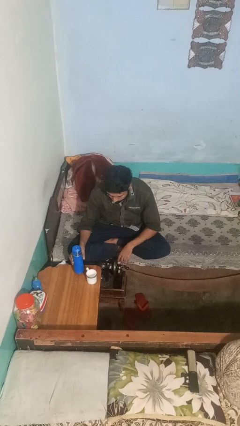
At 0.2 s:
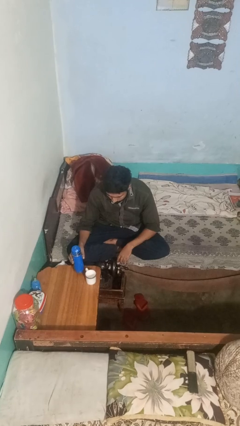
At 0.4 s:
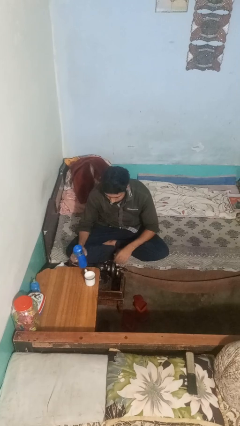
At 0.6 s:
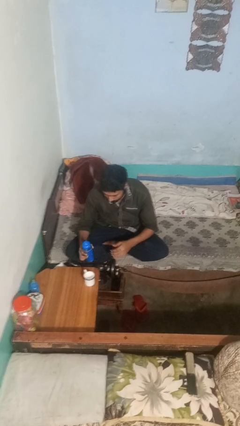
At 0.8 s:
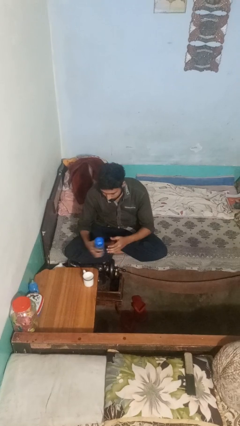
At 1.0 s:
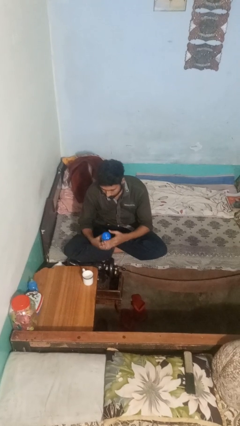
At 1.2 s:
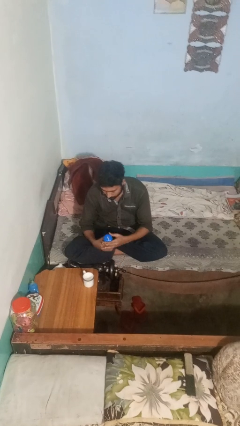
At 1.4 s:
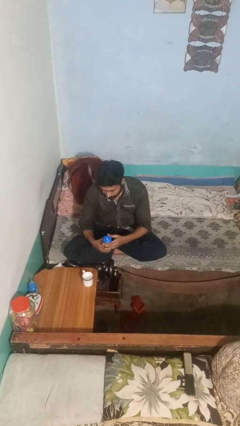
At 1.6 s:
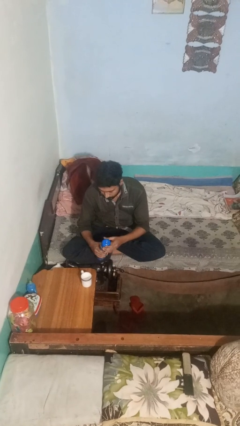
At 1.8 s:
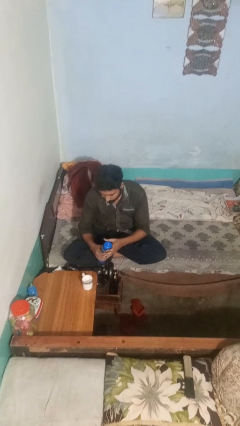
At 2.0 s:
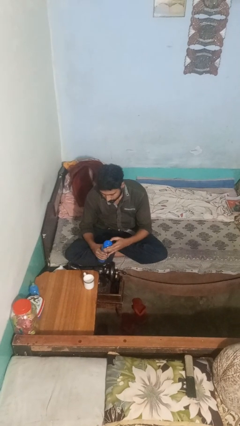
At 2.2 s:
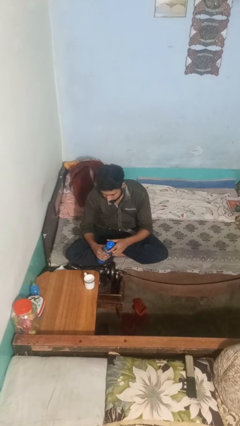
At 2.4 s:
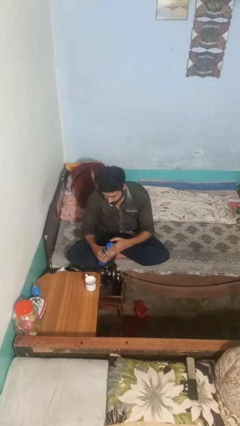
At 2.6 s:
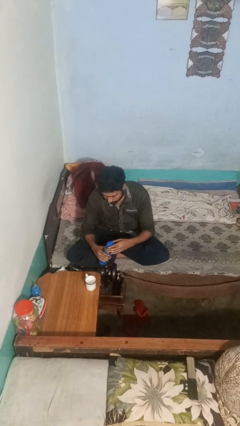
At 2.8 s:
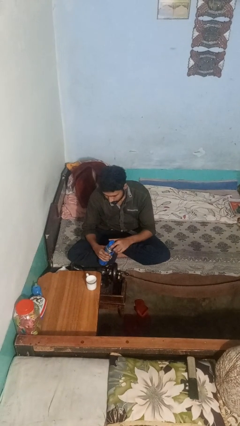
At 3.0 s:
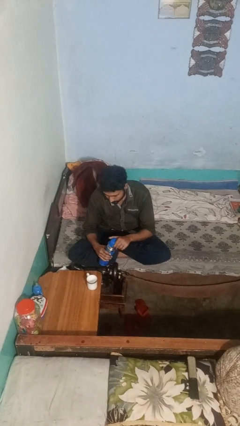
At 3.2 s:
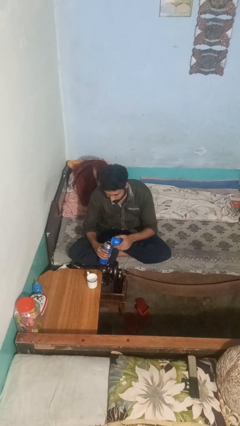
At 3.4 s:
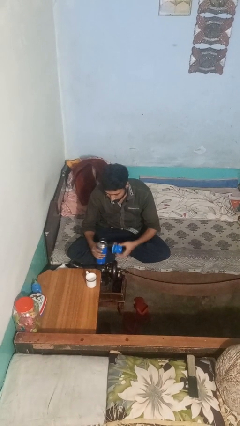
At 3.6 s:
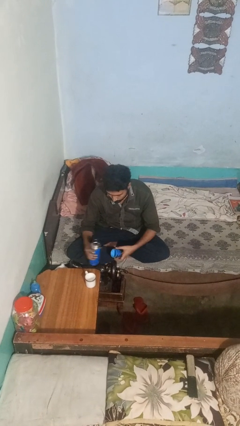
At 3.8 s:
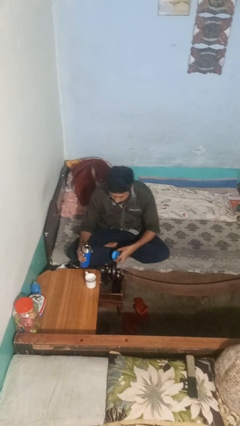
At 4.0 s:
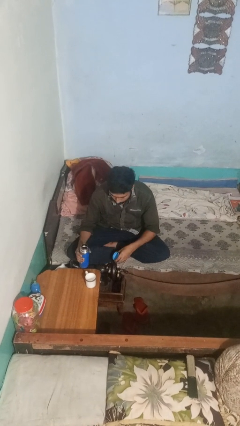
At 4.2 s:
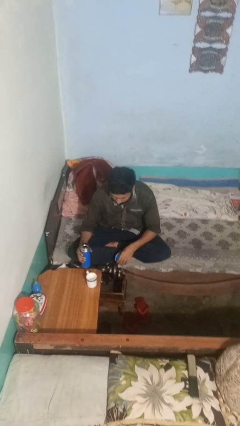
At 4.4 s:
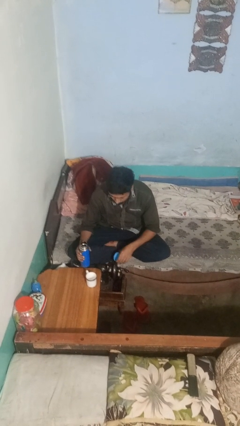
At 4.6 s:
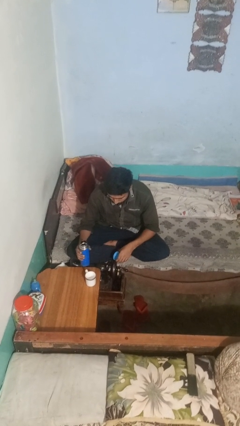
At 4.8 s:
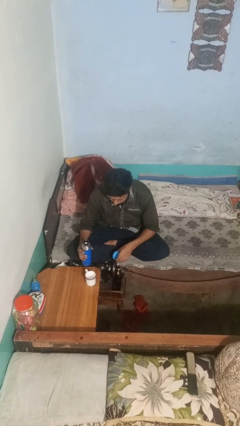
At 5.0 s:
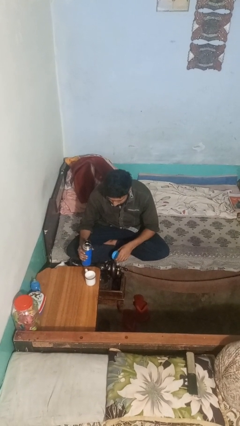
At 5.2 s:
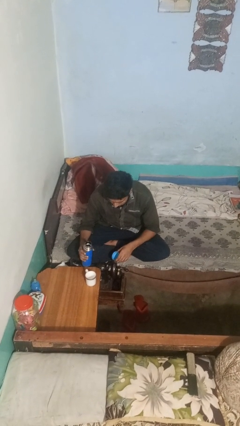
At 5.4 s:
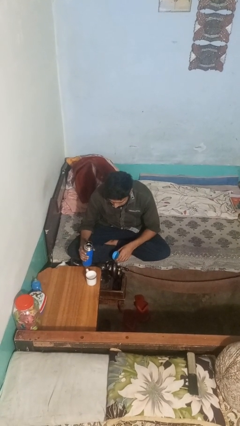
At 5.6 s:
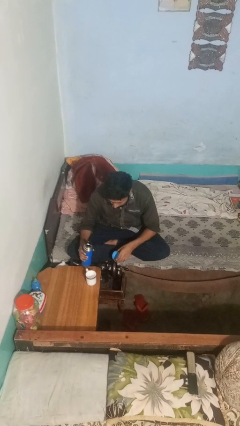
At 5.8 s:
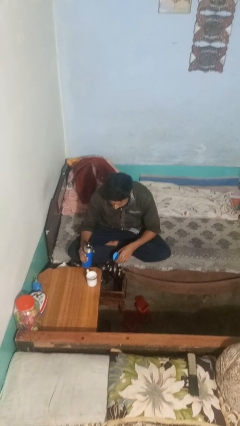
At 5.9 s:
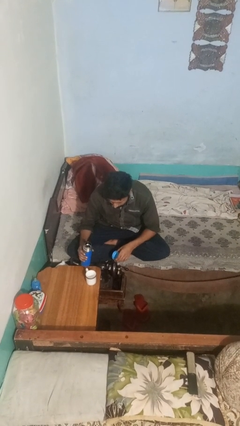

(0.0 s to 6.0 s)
person unscrews lid from bottle

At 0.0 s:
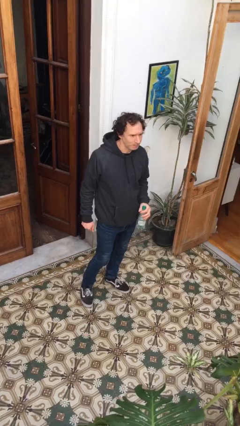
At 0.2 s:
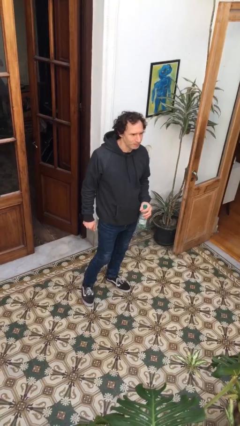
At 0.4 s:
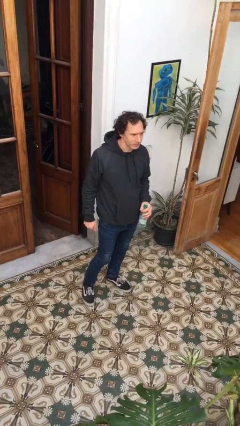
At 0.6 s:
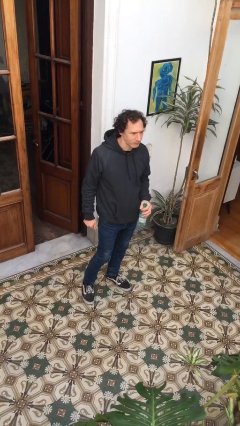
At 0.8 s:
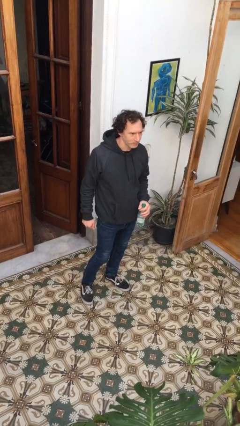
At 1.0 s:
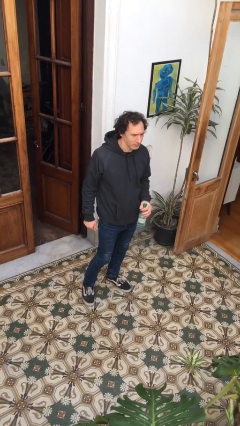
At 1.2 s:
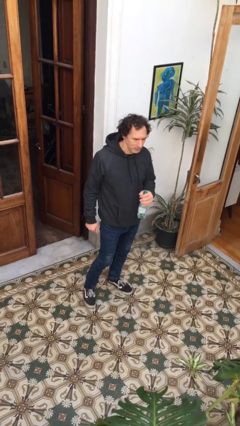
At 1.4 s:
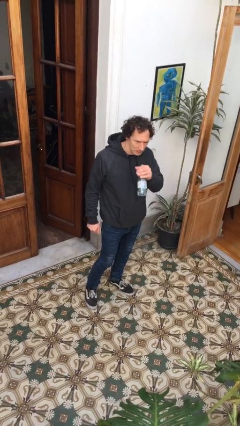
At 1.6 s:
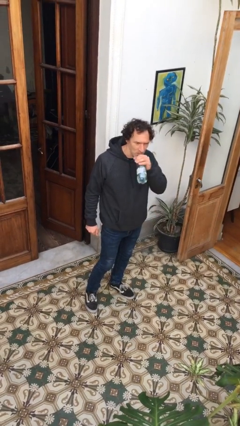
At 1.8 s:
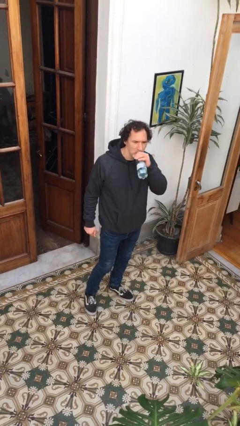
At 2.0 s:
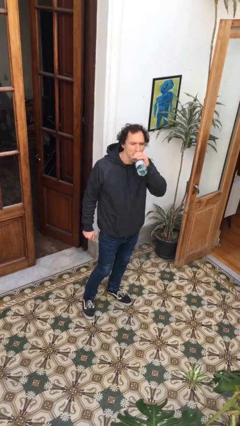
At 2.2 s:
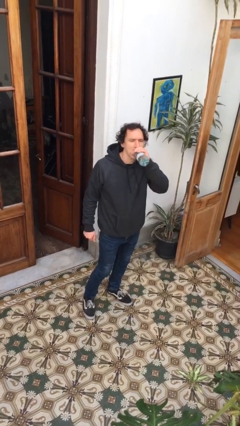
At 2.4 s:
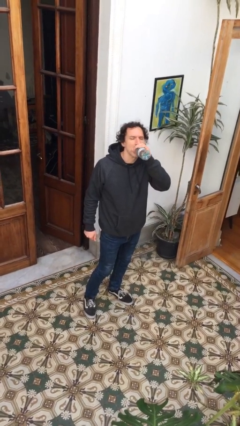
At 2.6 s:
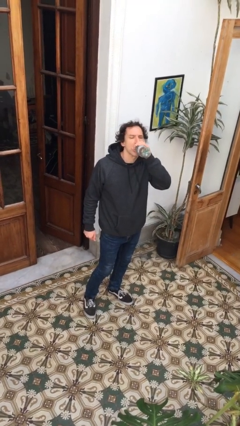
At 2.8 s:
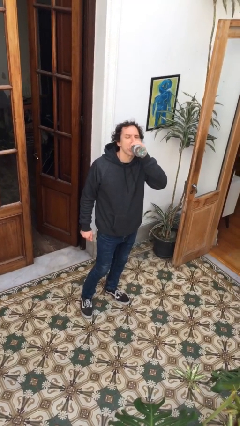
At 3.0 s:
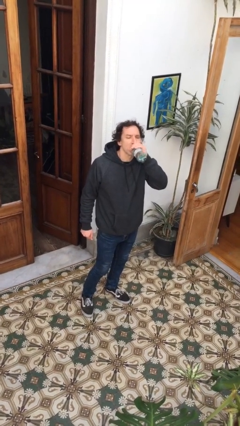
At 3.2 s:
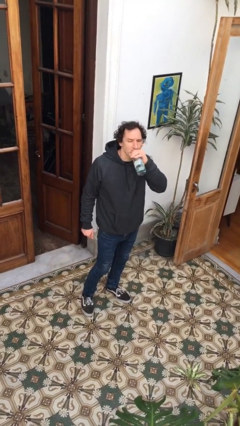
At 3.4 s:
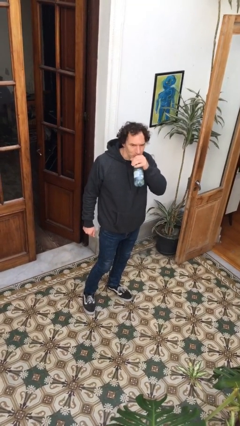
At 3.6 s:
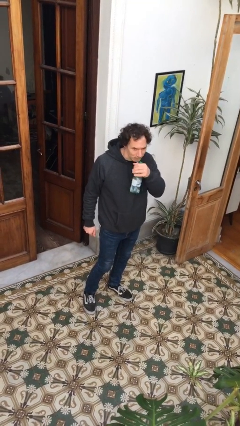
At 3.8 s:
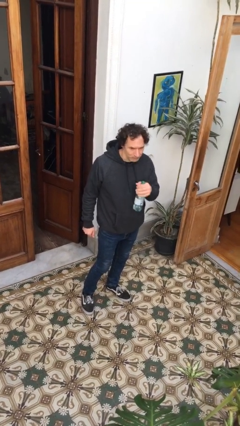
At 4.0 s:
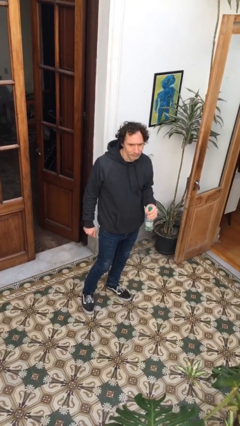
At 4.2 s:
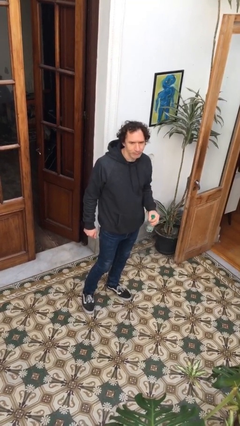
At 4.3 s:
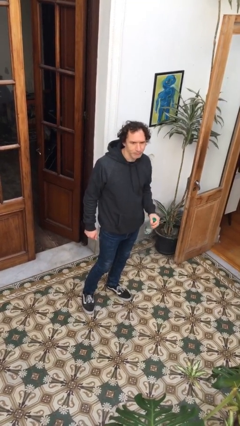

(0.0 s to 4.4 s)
person drinks from bottle

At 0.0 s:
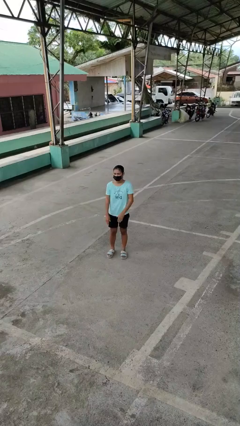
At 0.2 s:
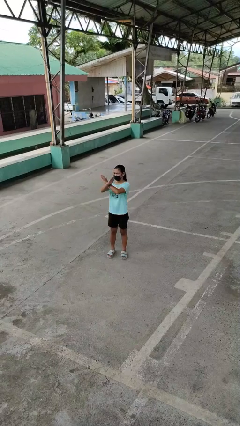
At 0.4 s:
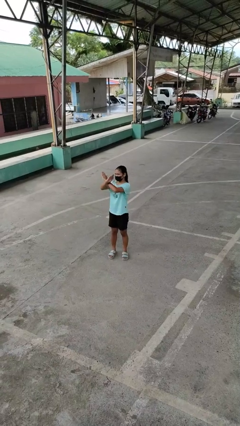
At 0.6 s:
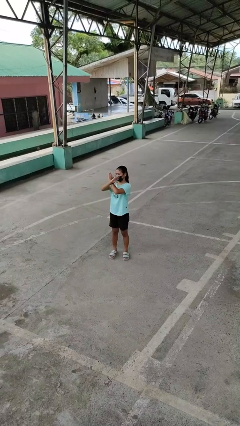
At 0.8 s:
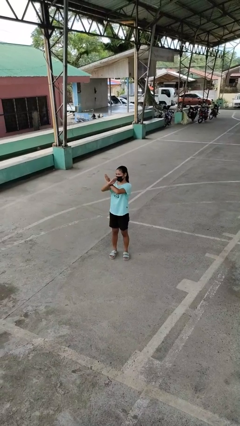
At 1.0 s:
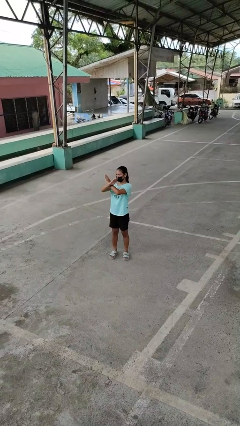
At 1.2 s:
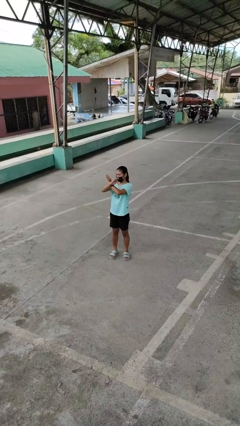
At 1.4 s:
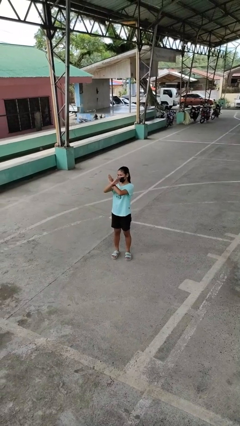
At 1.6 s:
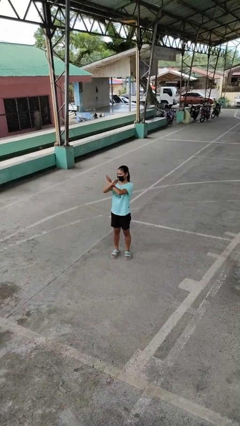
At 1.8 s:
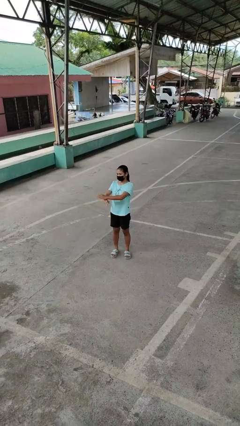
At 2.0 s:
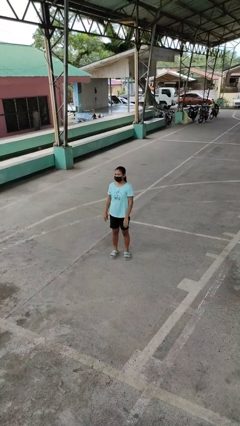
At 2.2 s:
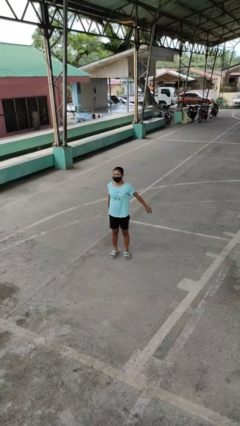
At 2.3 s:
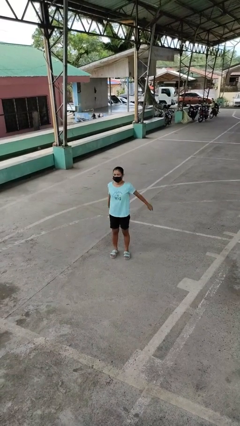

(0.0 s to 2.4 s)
person gestures arms x

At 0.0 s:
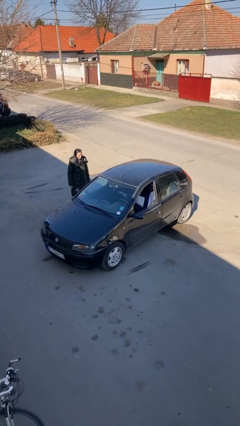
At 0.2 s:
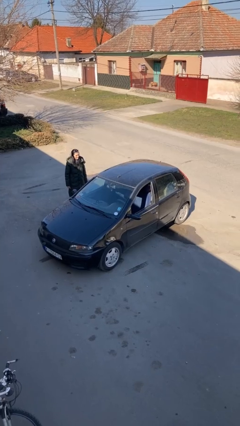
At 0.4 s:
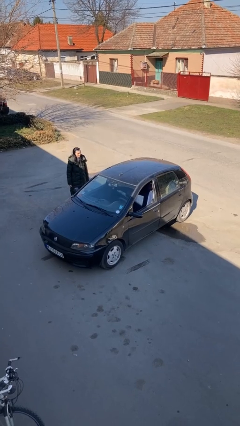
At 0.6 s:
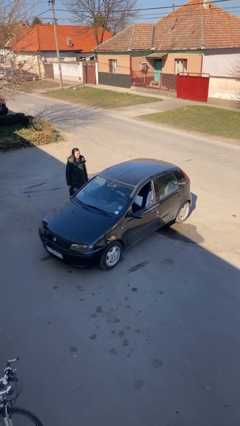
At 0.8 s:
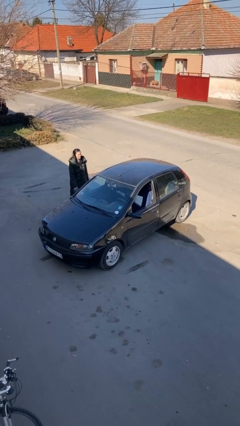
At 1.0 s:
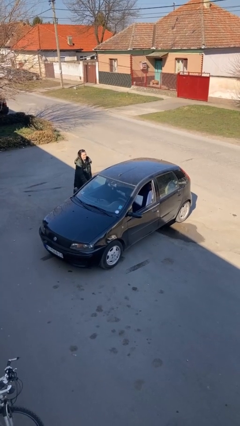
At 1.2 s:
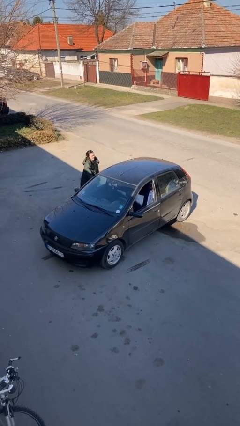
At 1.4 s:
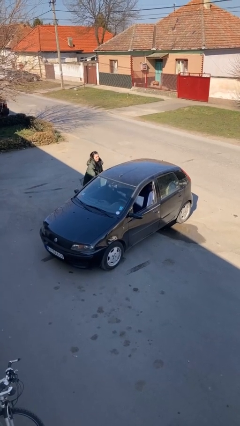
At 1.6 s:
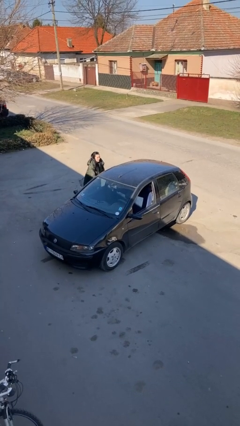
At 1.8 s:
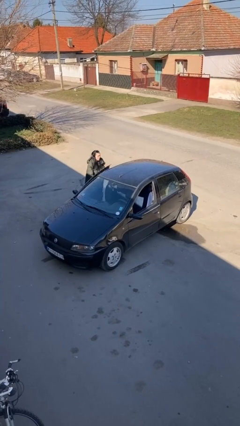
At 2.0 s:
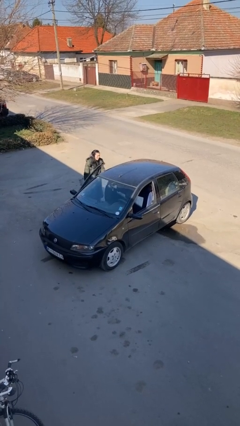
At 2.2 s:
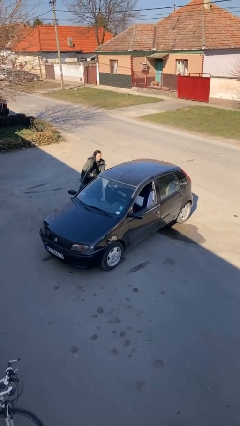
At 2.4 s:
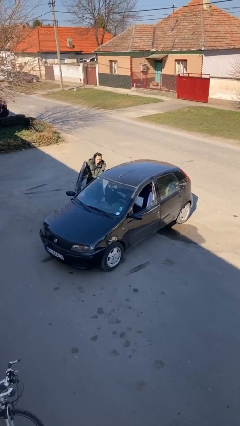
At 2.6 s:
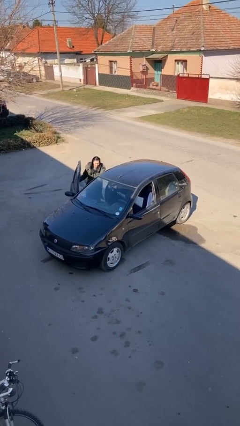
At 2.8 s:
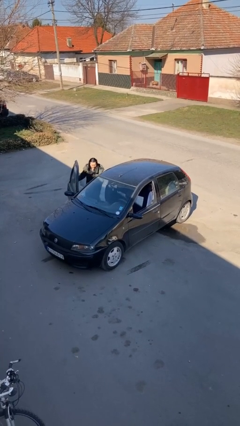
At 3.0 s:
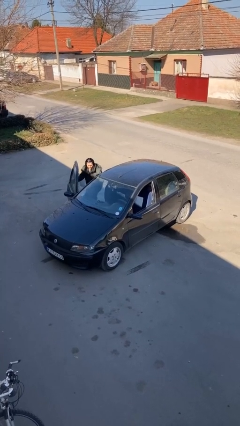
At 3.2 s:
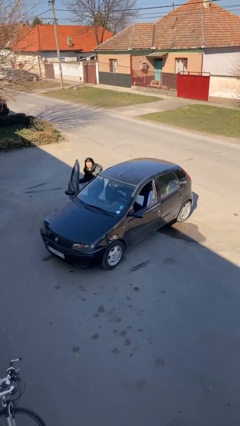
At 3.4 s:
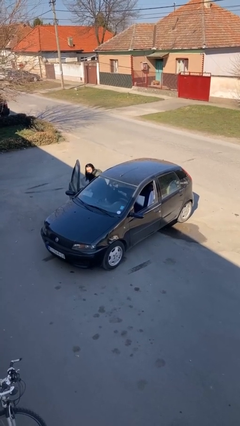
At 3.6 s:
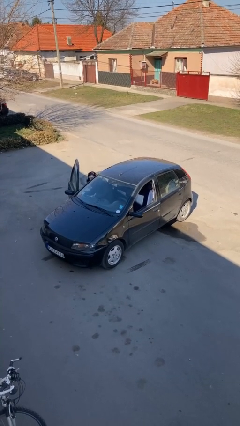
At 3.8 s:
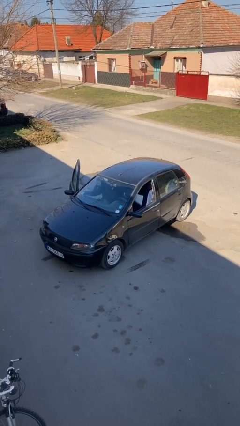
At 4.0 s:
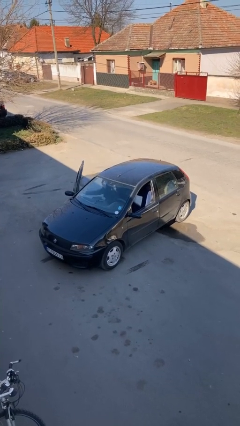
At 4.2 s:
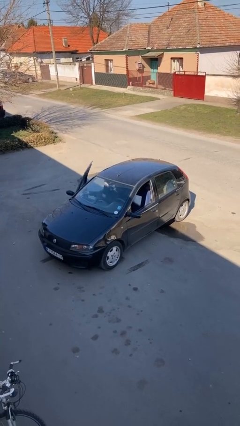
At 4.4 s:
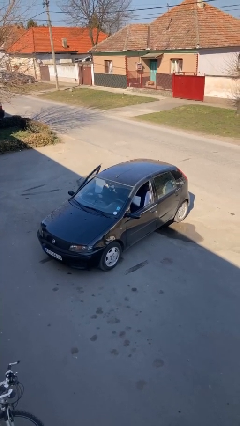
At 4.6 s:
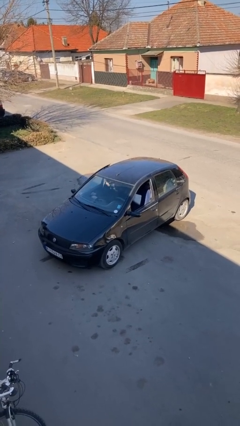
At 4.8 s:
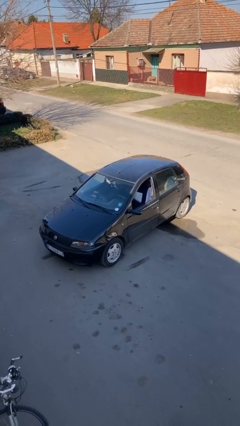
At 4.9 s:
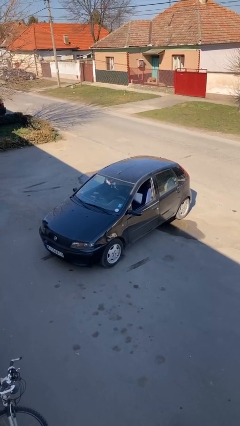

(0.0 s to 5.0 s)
car picks up person
